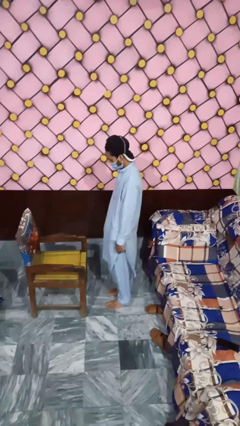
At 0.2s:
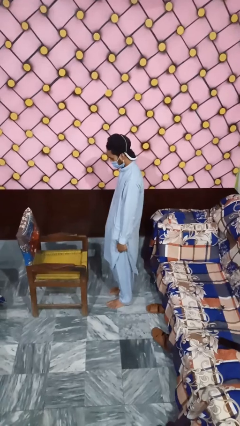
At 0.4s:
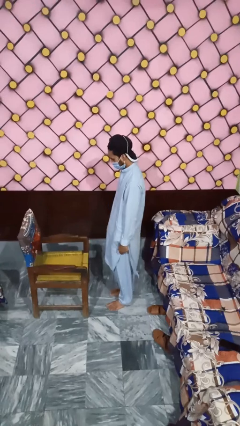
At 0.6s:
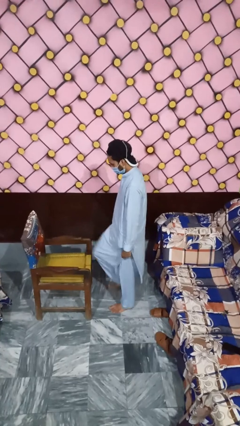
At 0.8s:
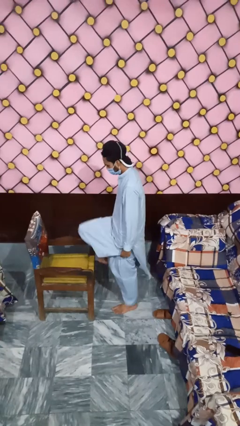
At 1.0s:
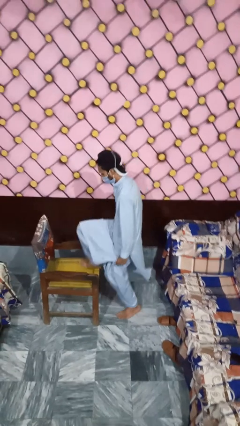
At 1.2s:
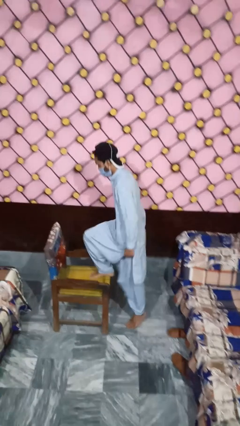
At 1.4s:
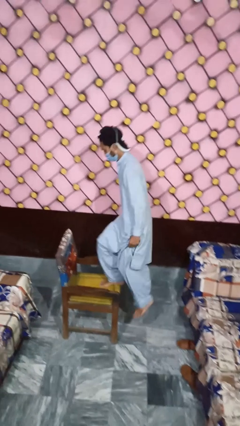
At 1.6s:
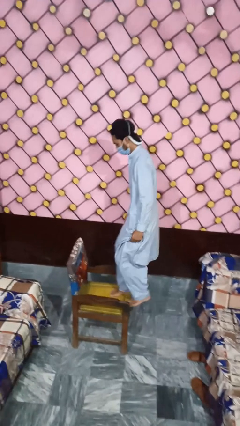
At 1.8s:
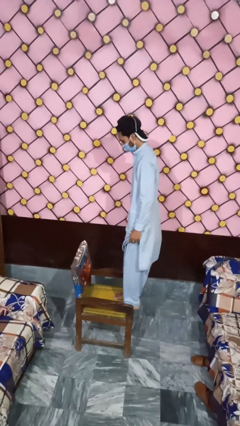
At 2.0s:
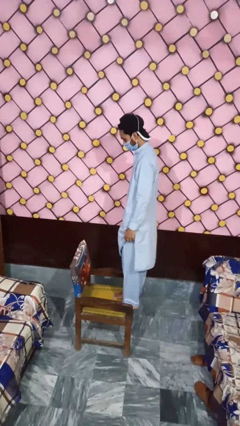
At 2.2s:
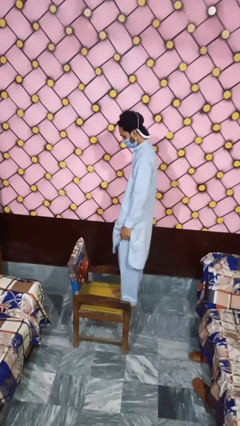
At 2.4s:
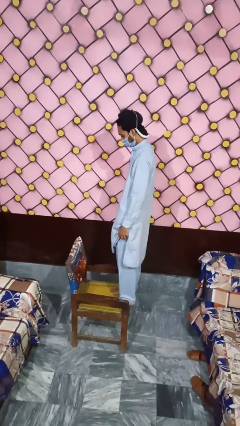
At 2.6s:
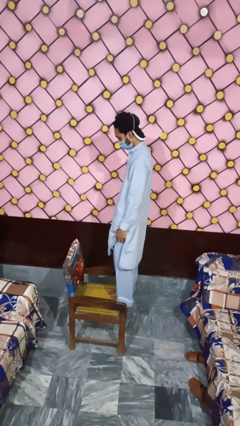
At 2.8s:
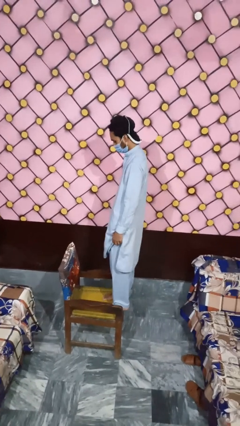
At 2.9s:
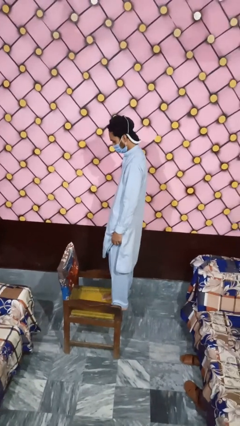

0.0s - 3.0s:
person climbs on chair

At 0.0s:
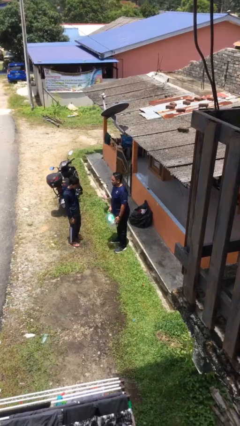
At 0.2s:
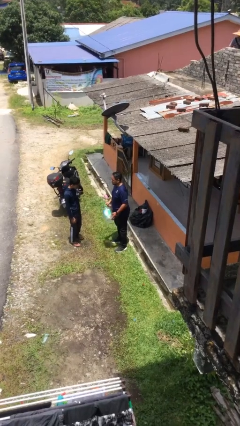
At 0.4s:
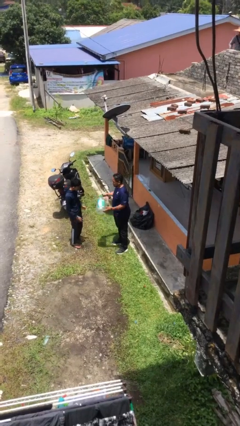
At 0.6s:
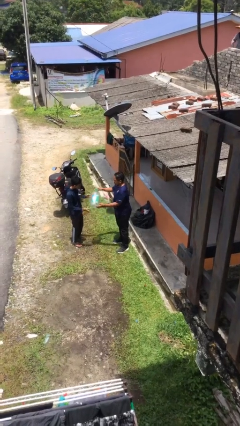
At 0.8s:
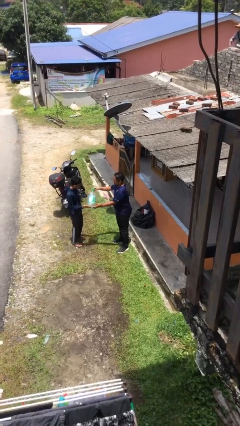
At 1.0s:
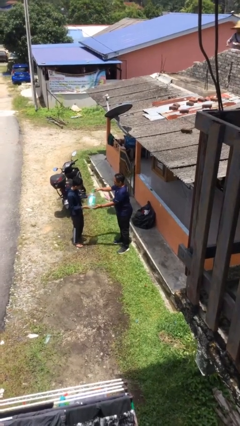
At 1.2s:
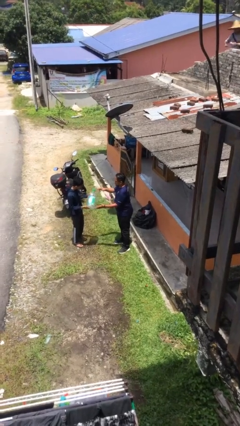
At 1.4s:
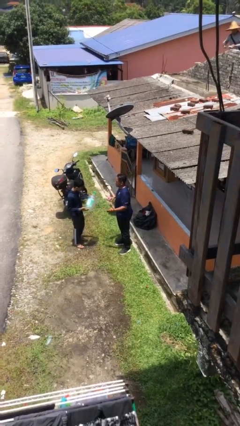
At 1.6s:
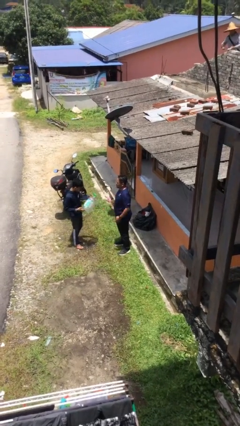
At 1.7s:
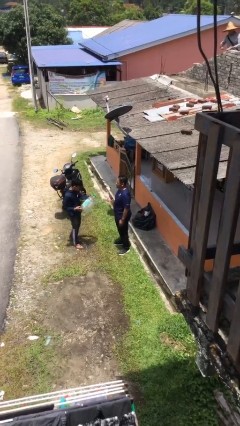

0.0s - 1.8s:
person transfers object to person

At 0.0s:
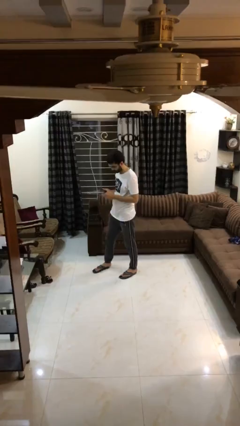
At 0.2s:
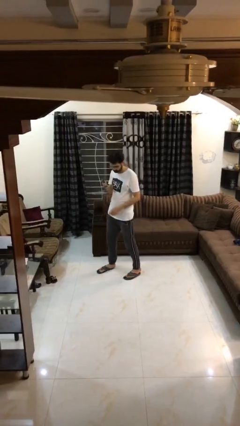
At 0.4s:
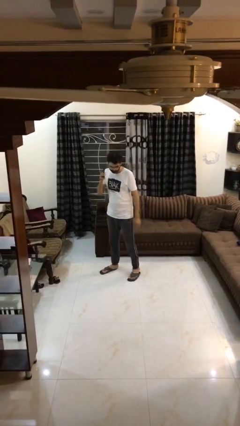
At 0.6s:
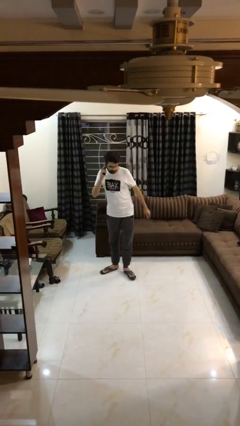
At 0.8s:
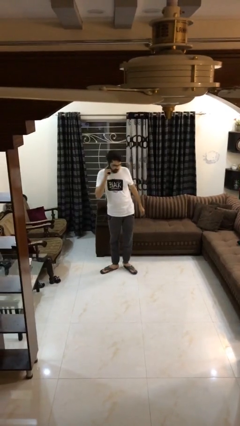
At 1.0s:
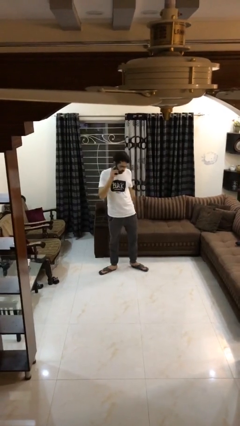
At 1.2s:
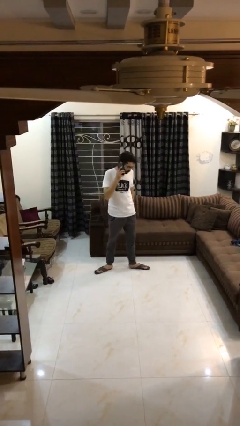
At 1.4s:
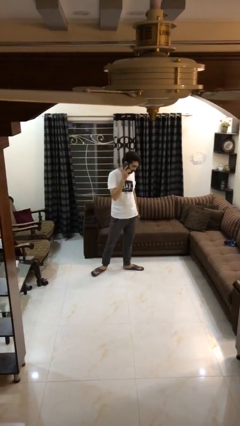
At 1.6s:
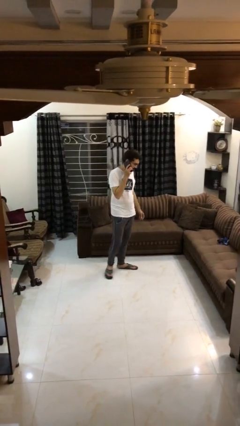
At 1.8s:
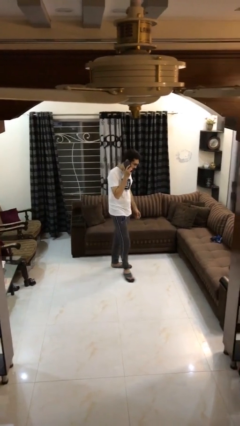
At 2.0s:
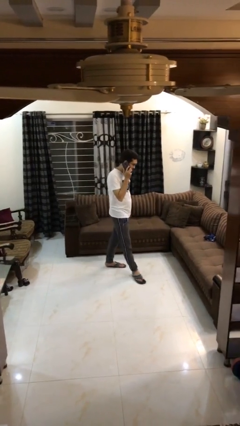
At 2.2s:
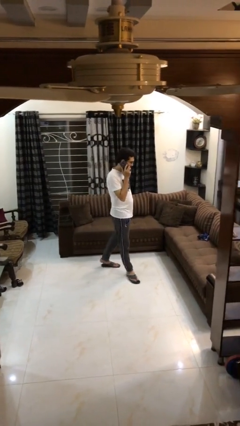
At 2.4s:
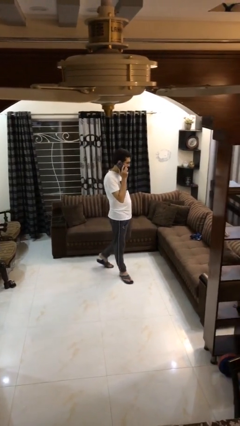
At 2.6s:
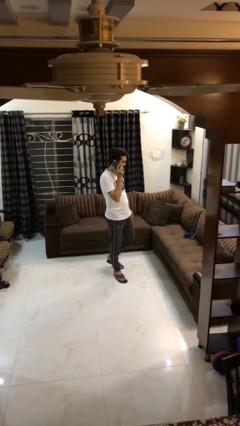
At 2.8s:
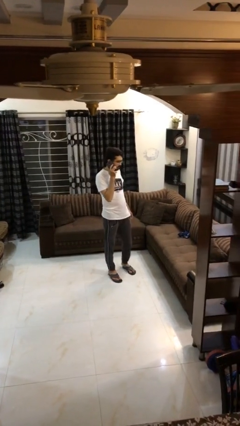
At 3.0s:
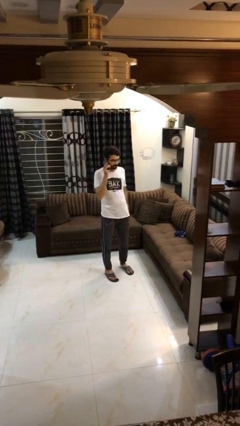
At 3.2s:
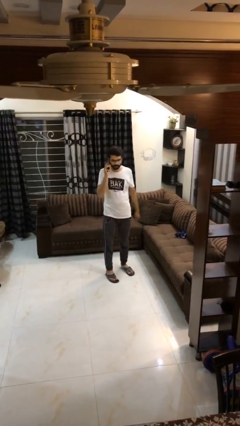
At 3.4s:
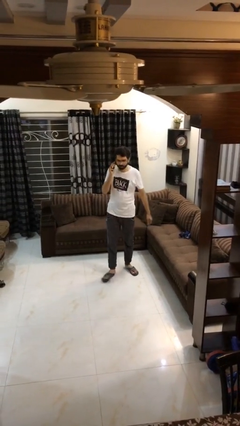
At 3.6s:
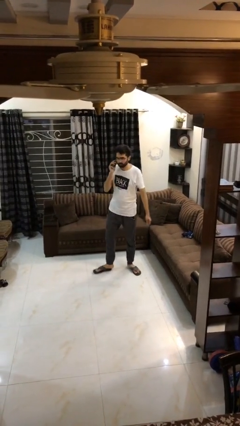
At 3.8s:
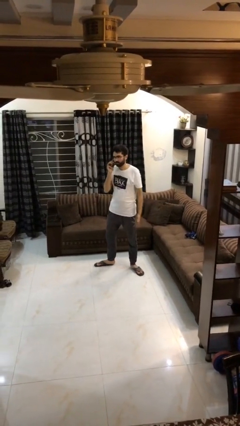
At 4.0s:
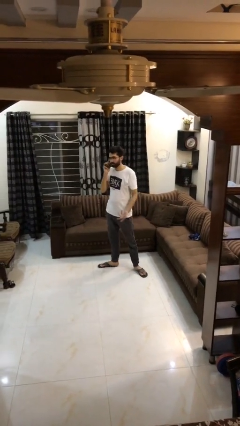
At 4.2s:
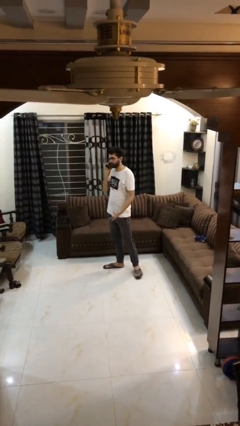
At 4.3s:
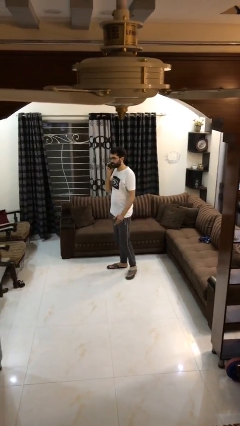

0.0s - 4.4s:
person talks on phone

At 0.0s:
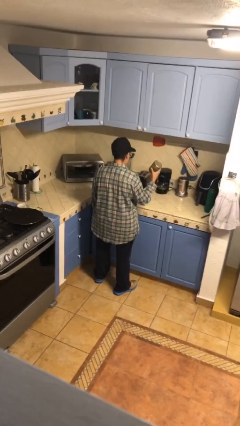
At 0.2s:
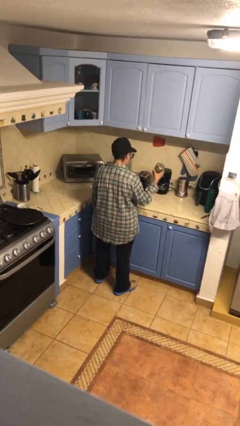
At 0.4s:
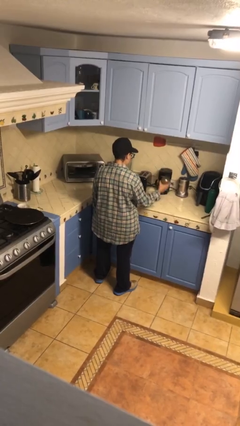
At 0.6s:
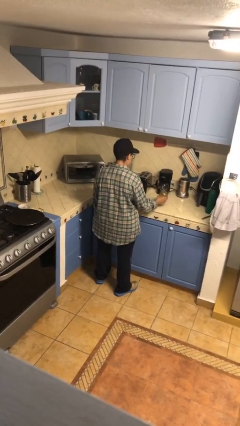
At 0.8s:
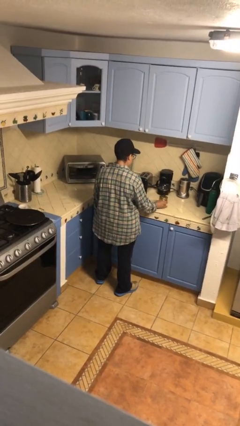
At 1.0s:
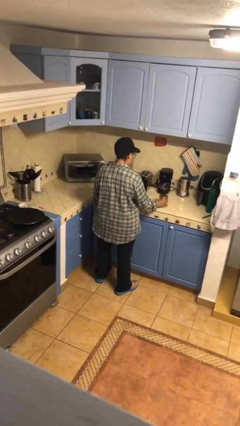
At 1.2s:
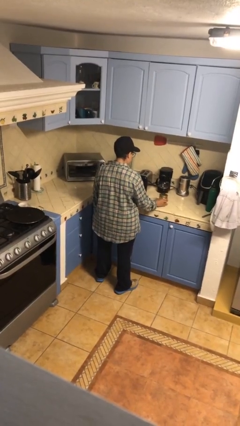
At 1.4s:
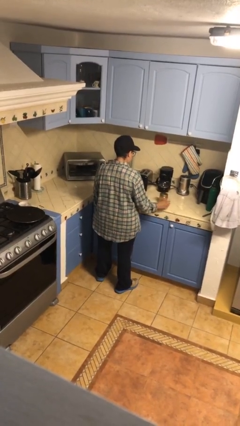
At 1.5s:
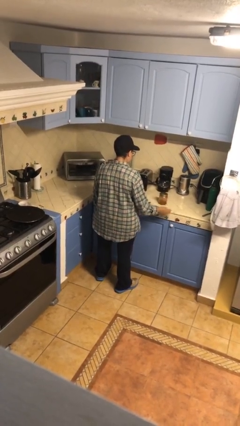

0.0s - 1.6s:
person puts down object on countertop

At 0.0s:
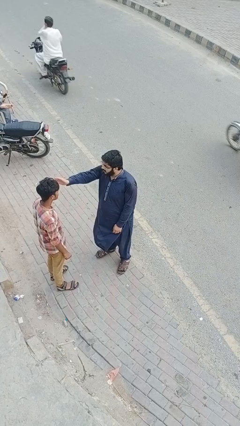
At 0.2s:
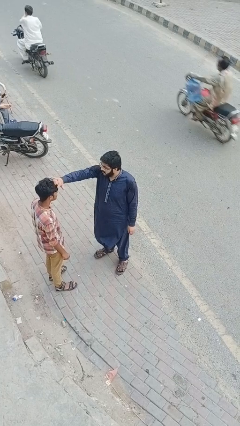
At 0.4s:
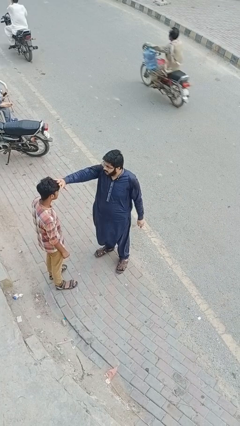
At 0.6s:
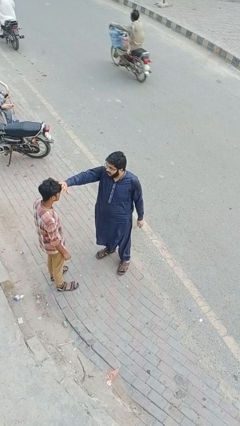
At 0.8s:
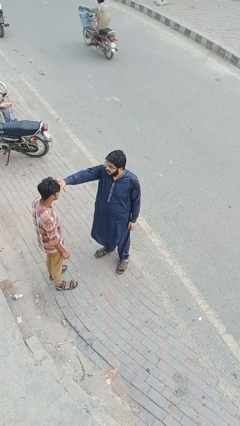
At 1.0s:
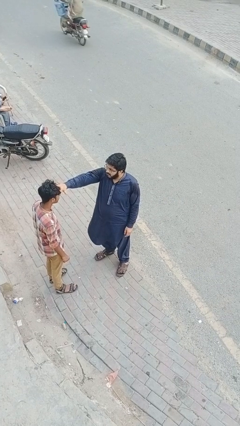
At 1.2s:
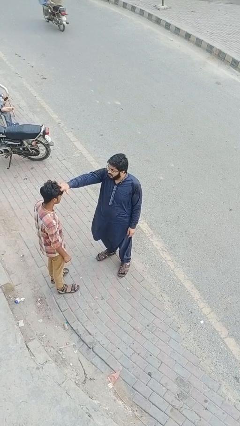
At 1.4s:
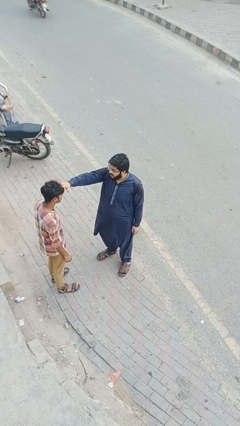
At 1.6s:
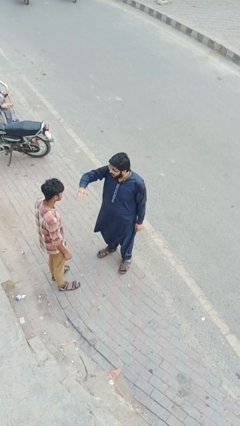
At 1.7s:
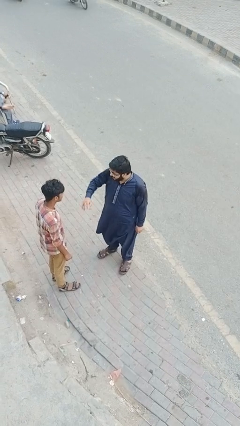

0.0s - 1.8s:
person grabs person by hair

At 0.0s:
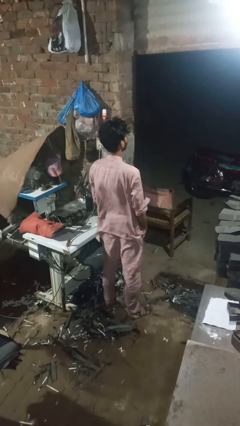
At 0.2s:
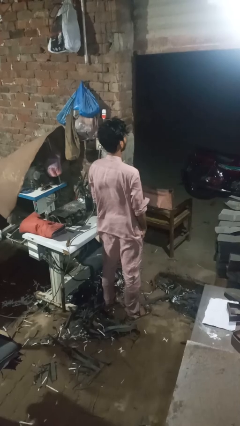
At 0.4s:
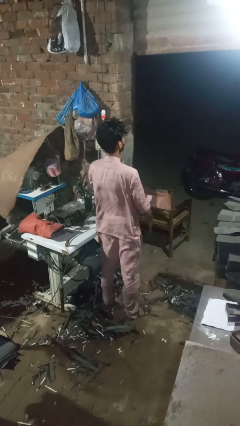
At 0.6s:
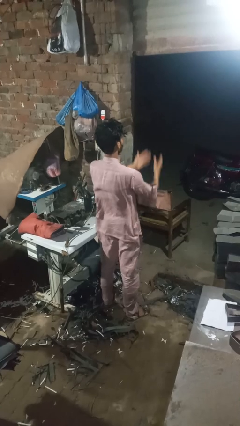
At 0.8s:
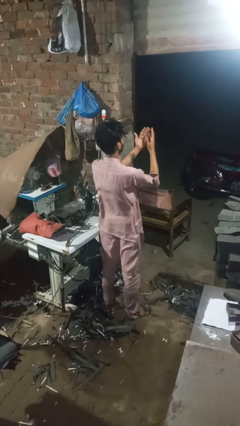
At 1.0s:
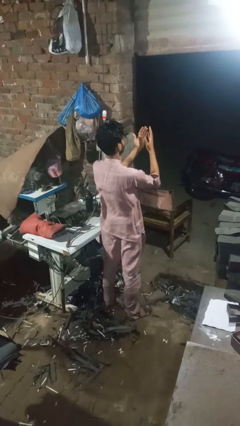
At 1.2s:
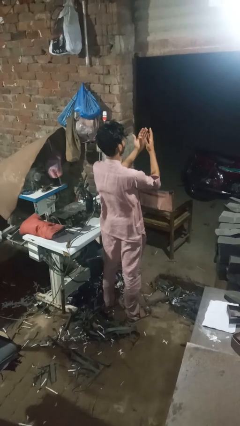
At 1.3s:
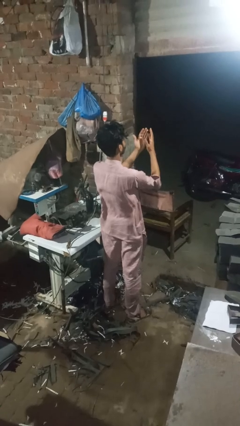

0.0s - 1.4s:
person prays

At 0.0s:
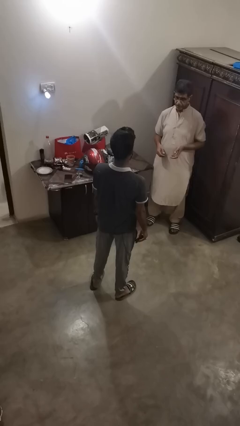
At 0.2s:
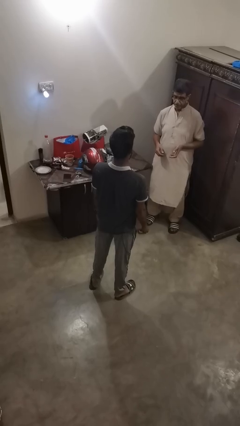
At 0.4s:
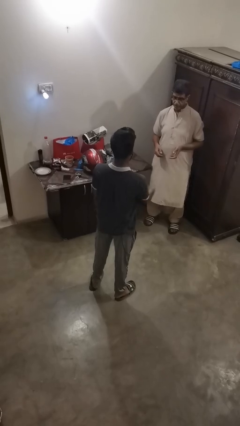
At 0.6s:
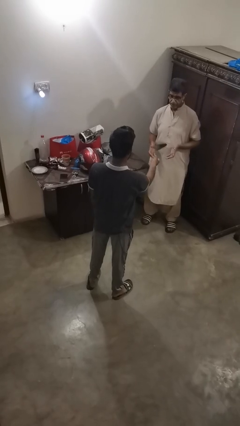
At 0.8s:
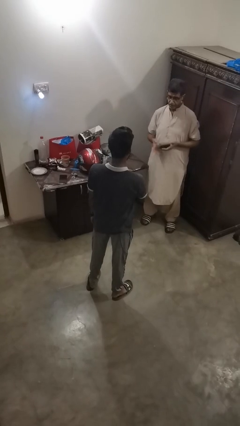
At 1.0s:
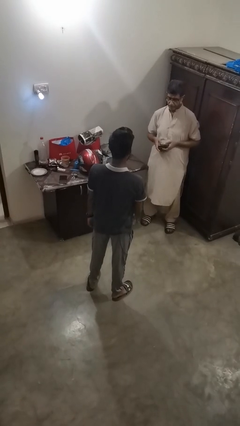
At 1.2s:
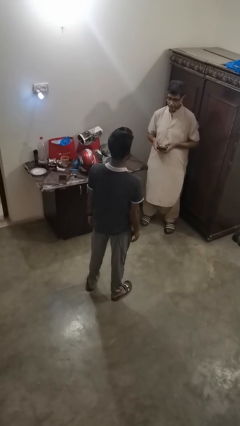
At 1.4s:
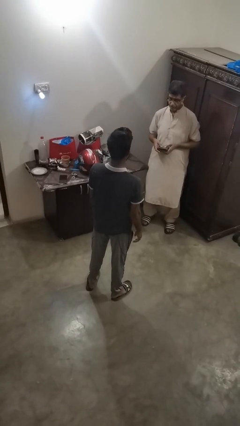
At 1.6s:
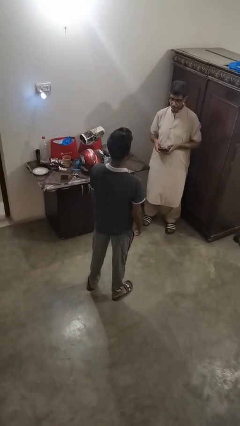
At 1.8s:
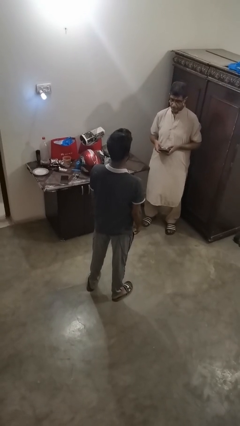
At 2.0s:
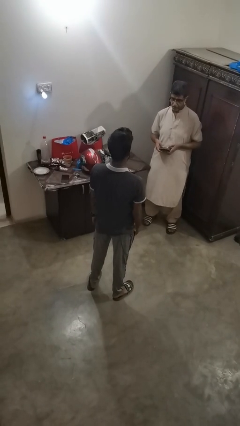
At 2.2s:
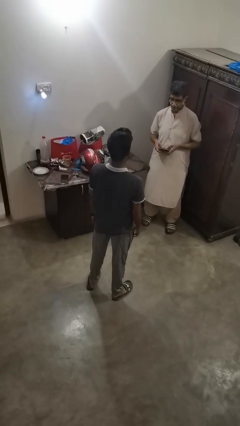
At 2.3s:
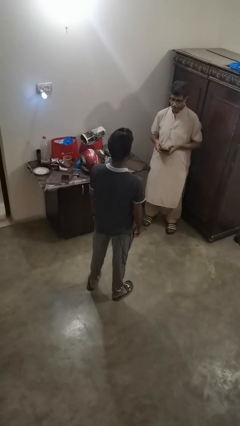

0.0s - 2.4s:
person throws object to person

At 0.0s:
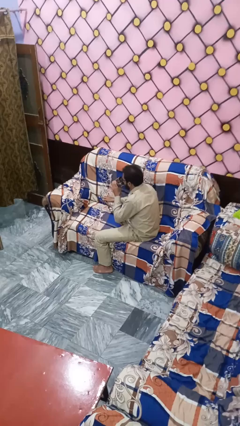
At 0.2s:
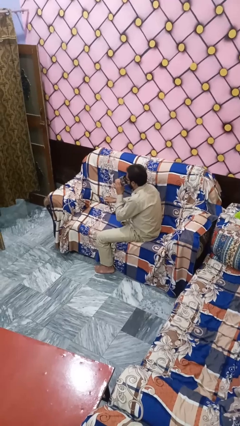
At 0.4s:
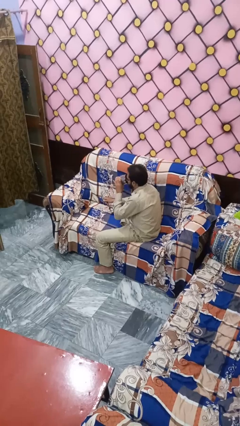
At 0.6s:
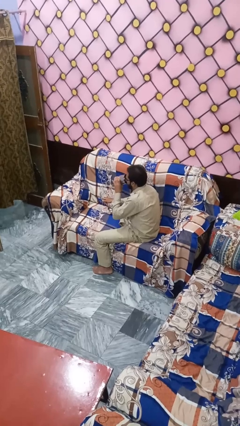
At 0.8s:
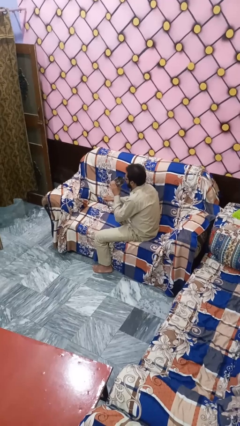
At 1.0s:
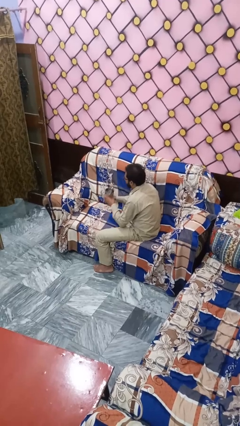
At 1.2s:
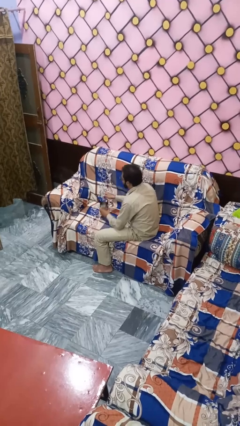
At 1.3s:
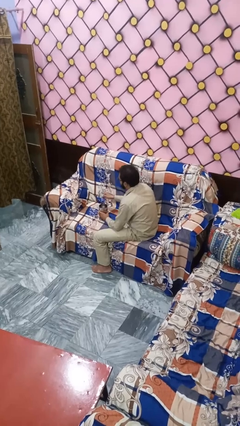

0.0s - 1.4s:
person drinks from mug
